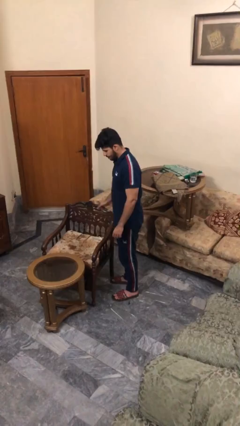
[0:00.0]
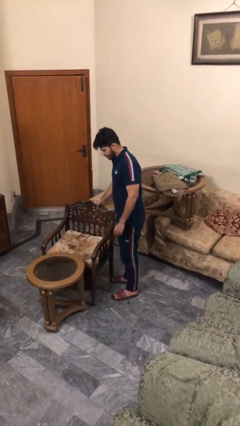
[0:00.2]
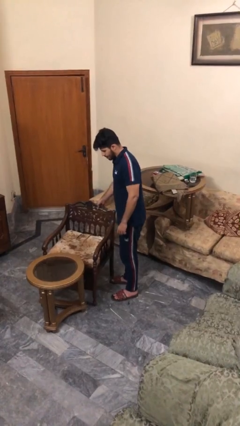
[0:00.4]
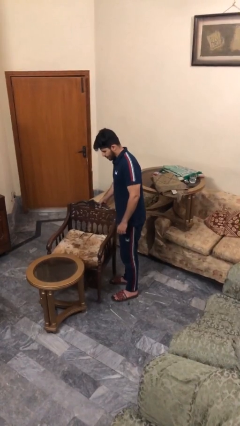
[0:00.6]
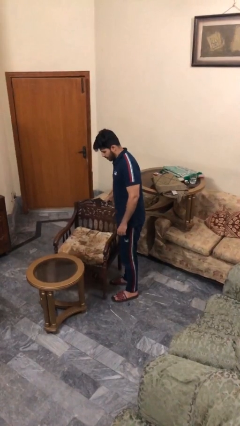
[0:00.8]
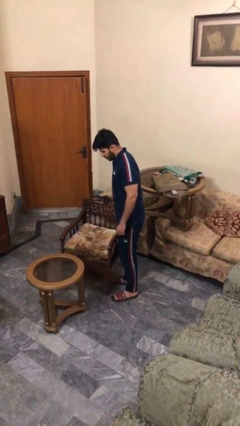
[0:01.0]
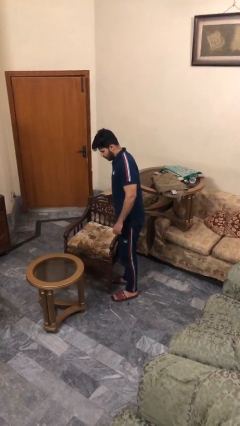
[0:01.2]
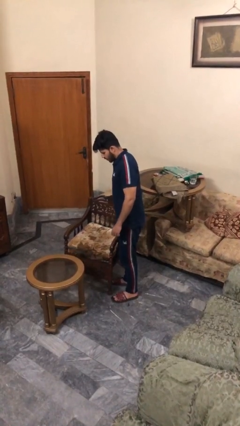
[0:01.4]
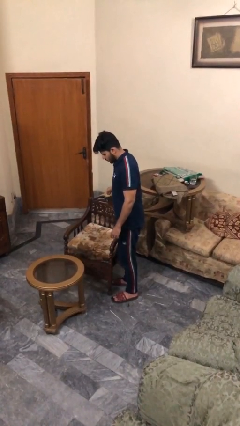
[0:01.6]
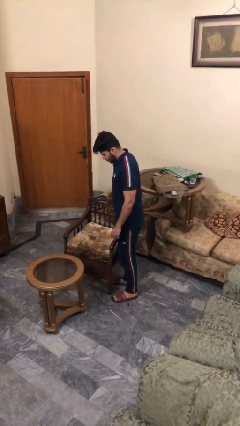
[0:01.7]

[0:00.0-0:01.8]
person pulls out chair

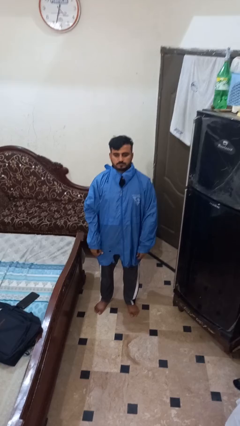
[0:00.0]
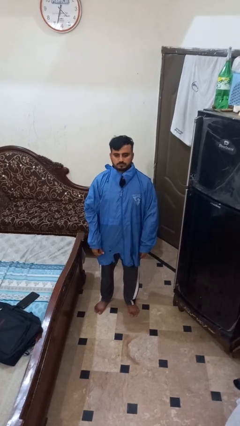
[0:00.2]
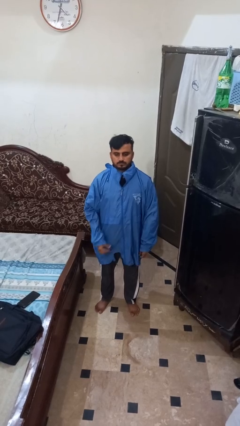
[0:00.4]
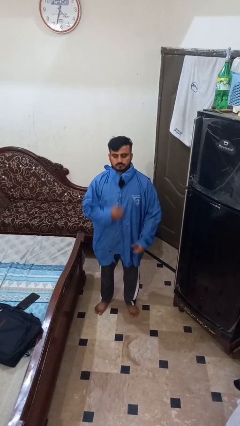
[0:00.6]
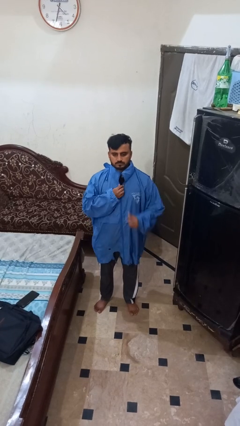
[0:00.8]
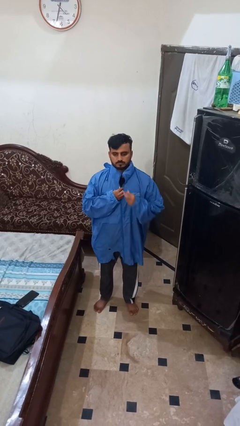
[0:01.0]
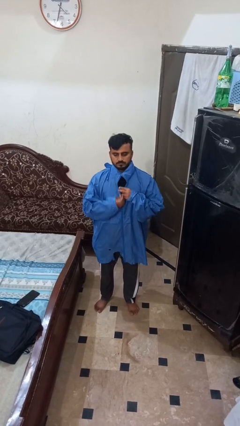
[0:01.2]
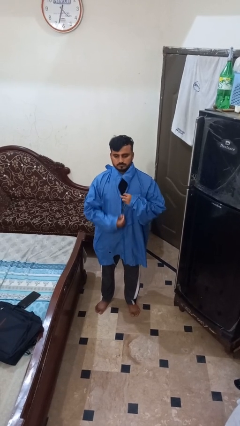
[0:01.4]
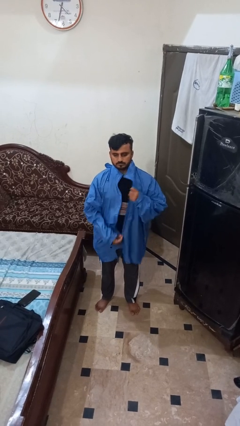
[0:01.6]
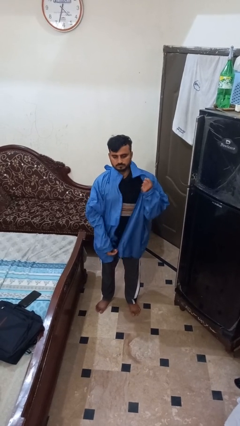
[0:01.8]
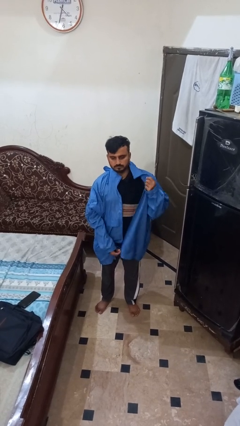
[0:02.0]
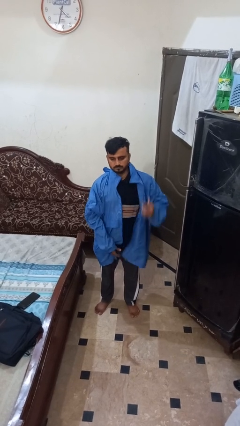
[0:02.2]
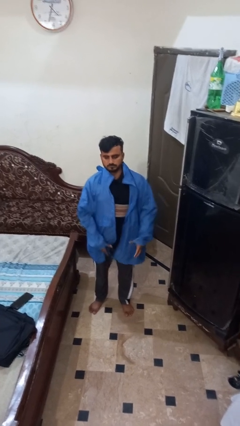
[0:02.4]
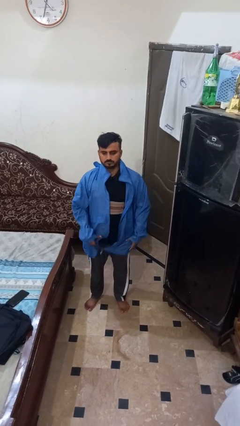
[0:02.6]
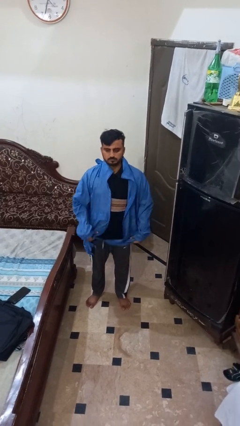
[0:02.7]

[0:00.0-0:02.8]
person unzips jacket

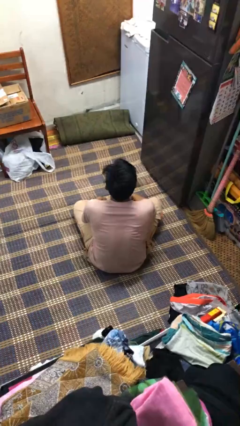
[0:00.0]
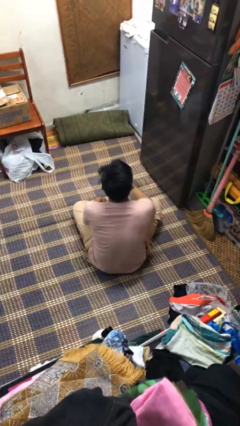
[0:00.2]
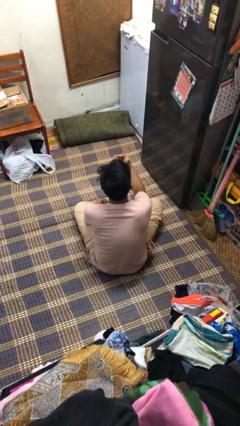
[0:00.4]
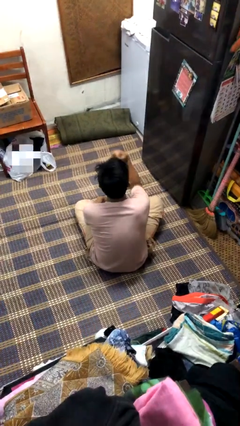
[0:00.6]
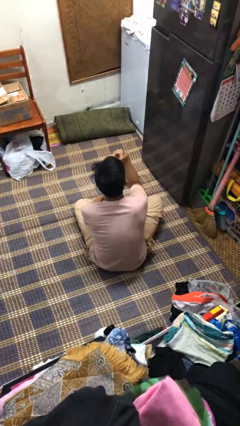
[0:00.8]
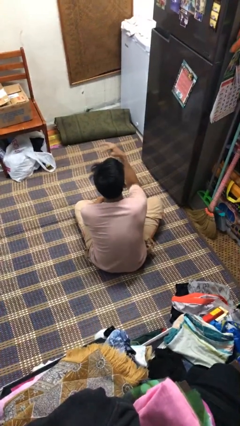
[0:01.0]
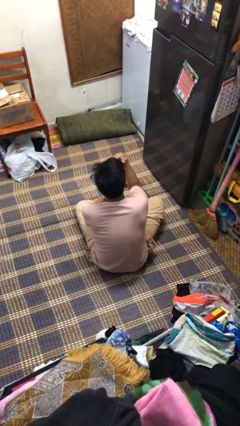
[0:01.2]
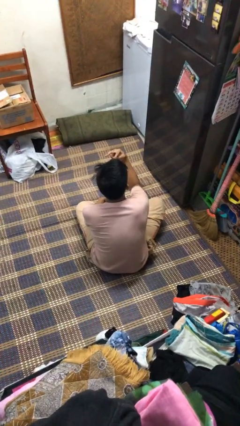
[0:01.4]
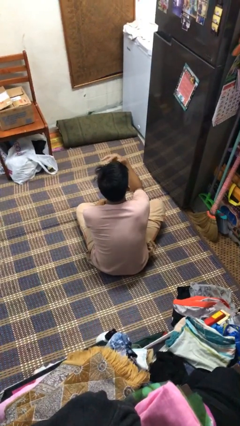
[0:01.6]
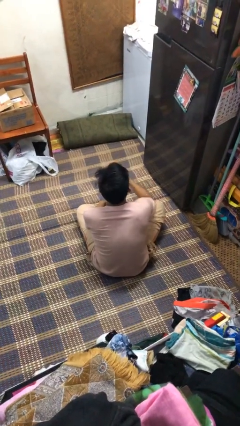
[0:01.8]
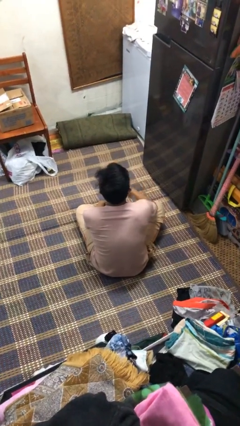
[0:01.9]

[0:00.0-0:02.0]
person gestures watch closely

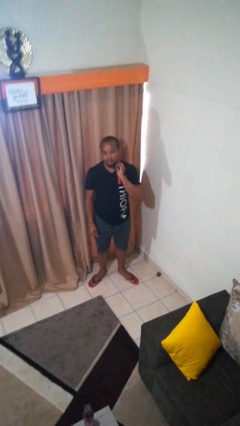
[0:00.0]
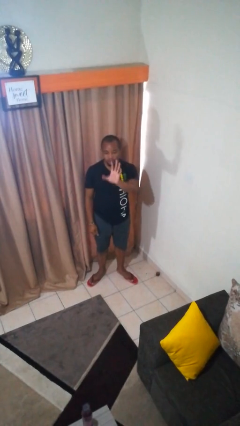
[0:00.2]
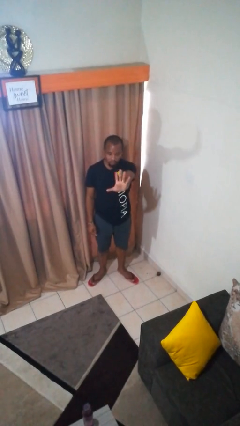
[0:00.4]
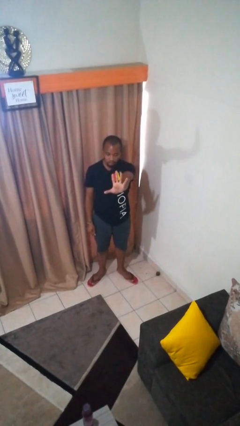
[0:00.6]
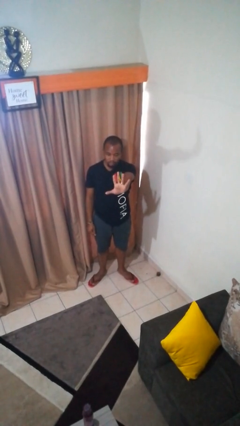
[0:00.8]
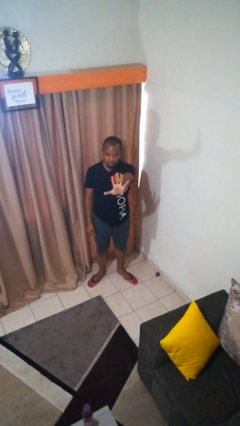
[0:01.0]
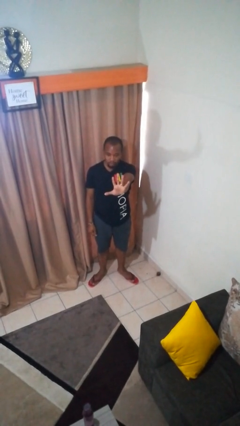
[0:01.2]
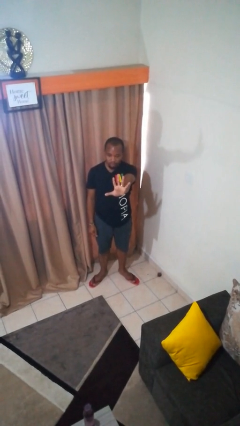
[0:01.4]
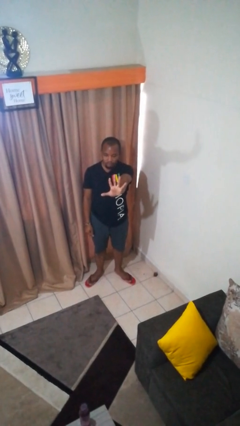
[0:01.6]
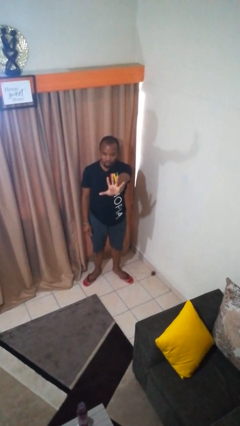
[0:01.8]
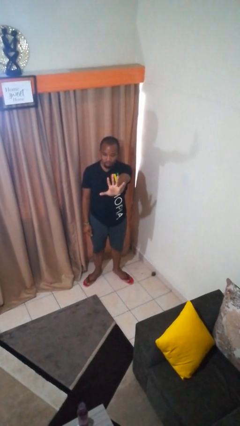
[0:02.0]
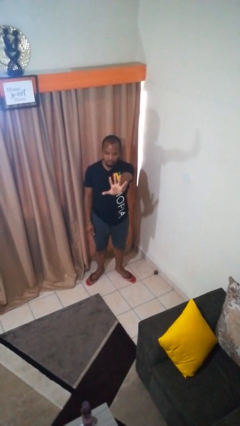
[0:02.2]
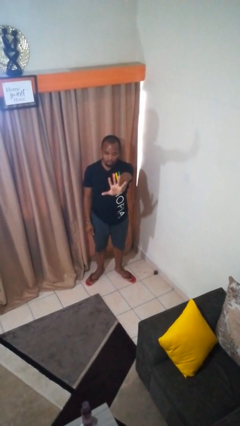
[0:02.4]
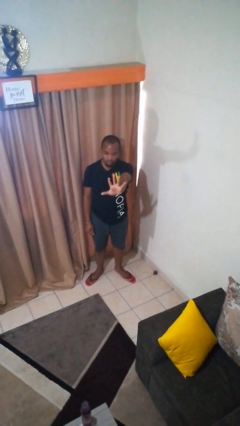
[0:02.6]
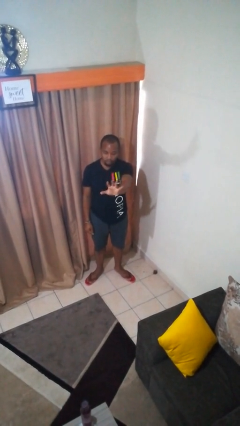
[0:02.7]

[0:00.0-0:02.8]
person gestures number five

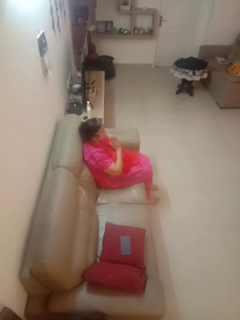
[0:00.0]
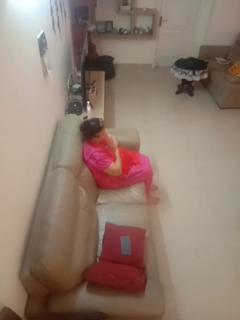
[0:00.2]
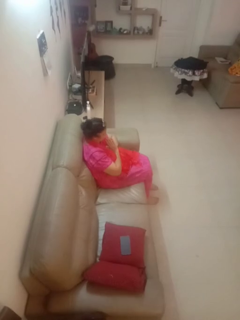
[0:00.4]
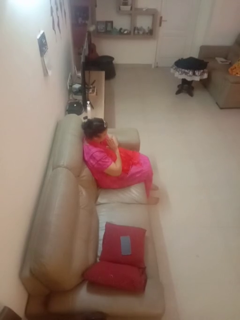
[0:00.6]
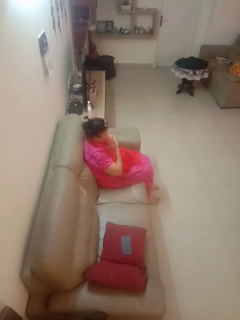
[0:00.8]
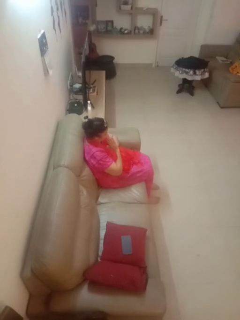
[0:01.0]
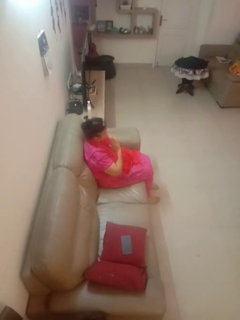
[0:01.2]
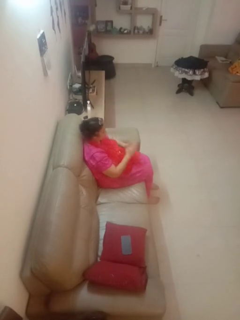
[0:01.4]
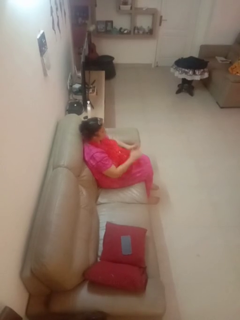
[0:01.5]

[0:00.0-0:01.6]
person prays

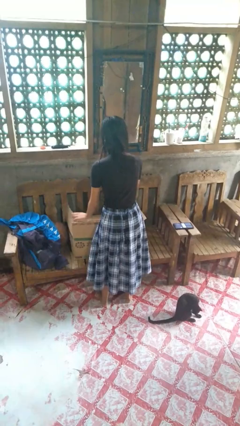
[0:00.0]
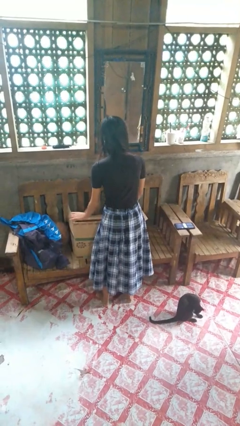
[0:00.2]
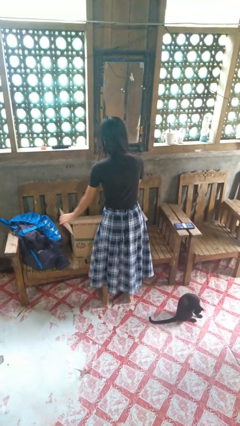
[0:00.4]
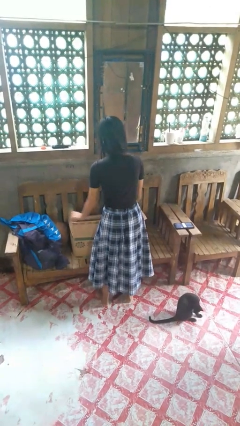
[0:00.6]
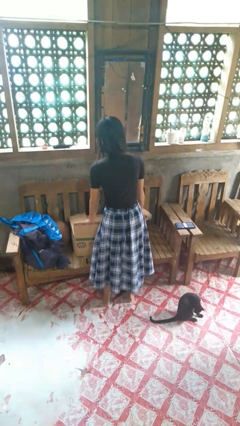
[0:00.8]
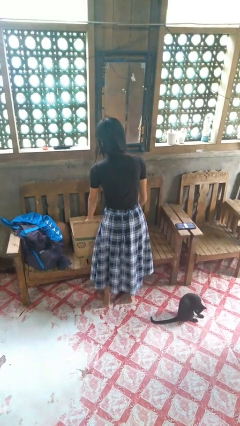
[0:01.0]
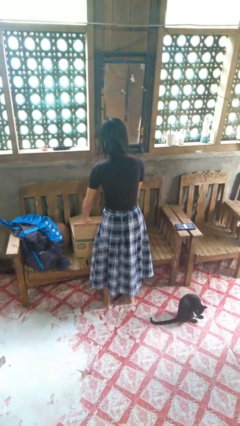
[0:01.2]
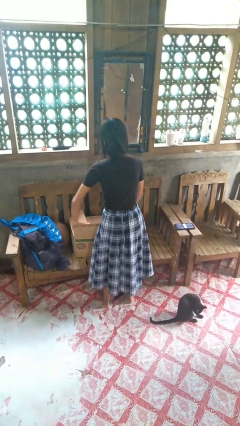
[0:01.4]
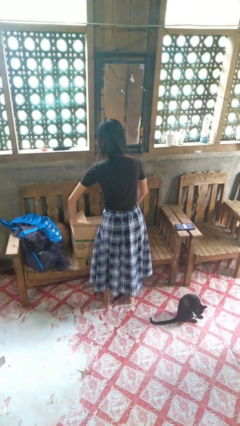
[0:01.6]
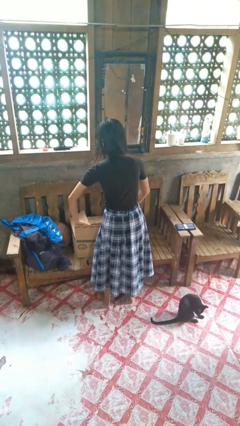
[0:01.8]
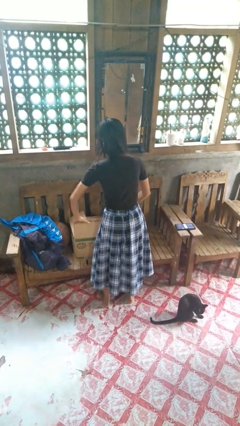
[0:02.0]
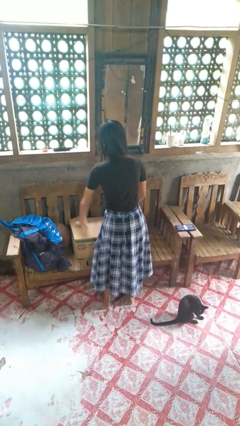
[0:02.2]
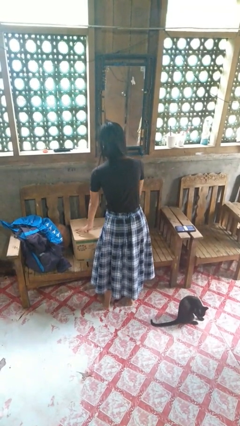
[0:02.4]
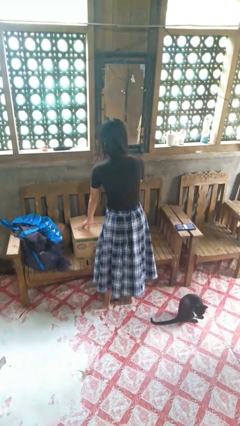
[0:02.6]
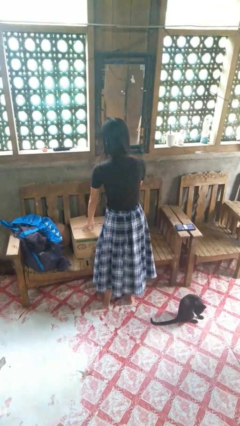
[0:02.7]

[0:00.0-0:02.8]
person closes box

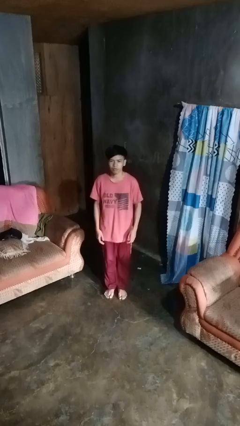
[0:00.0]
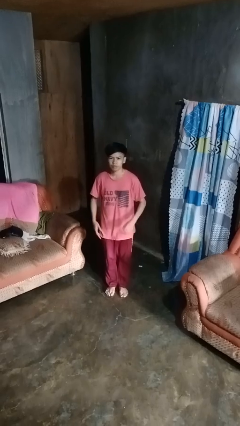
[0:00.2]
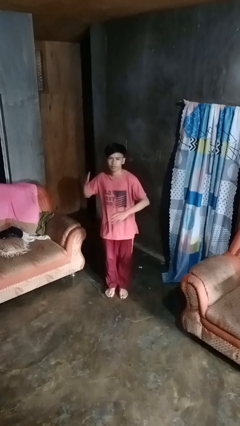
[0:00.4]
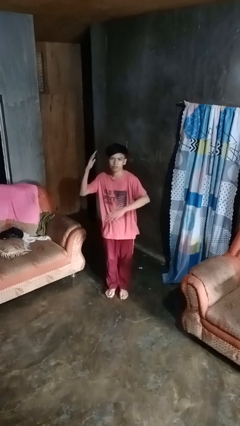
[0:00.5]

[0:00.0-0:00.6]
person karate chop

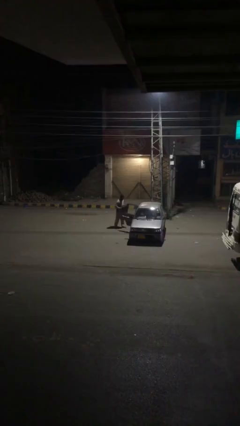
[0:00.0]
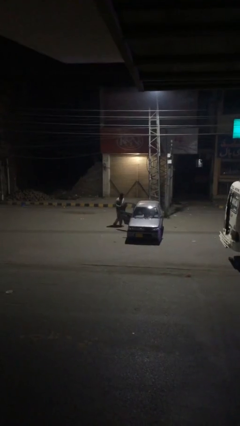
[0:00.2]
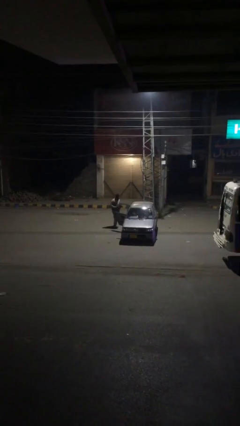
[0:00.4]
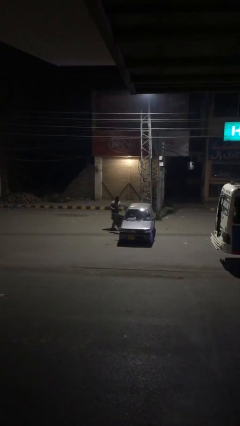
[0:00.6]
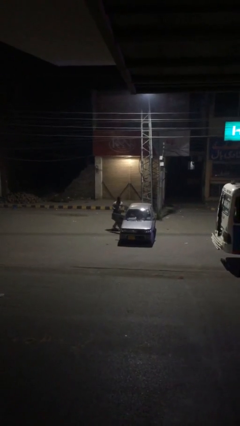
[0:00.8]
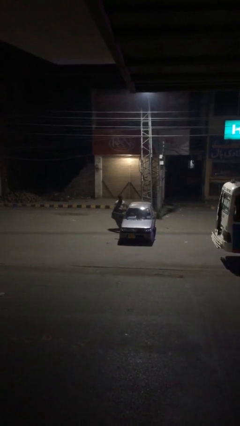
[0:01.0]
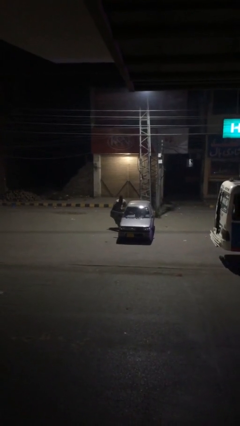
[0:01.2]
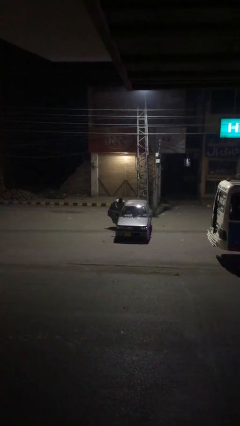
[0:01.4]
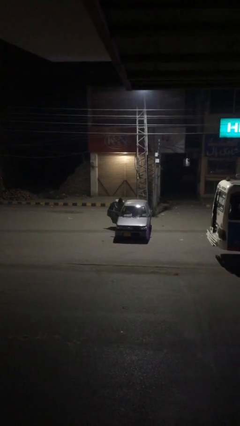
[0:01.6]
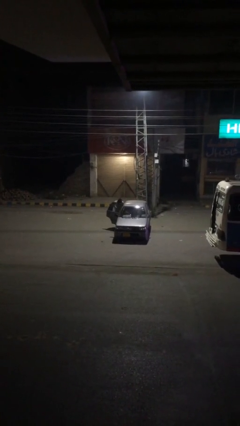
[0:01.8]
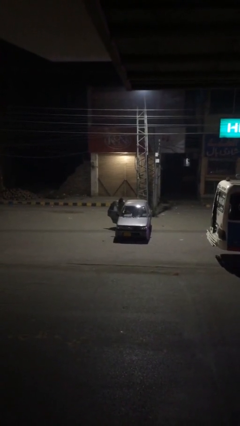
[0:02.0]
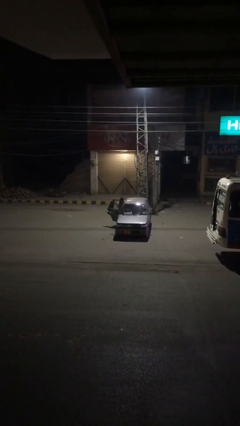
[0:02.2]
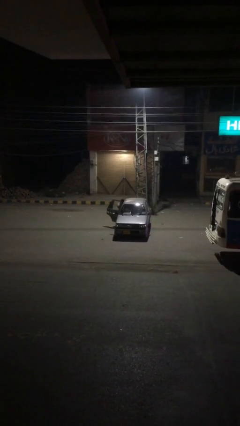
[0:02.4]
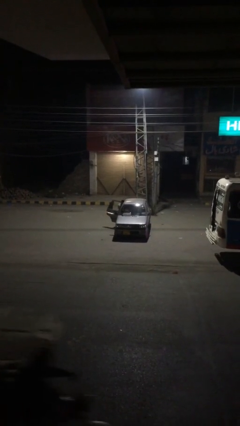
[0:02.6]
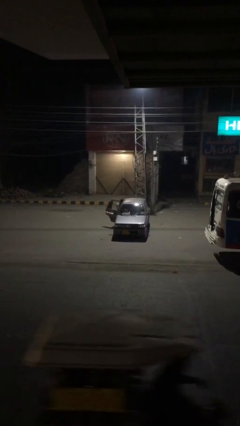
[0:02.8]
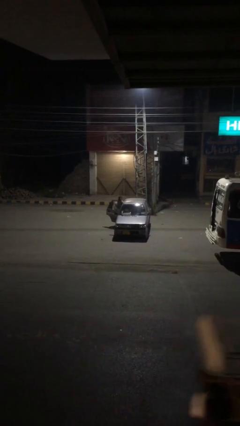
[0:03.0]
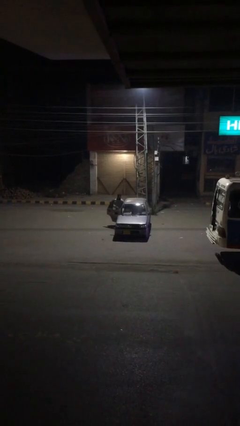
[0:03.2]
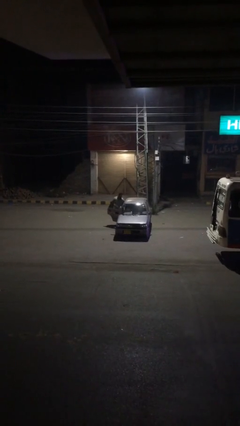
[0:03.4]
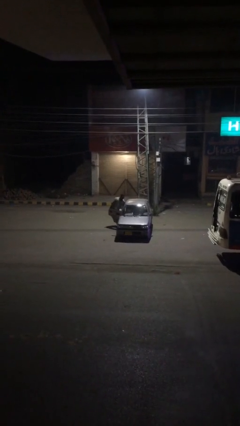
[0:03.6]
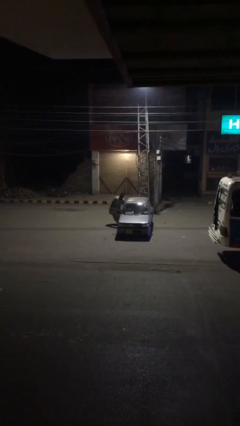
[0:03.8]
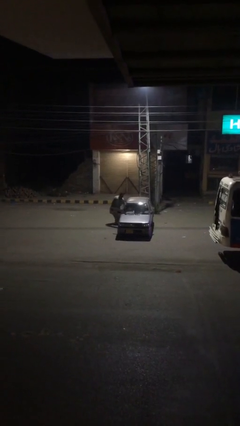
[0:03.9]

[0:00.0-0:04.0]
person loads car
